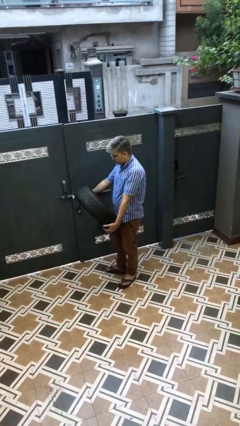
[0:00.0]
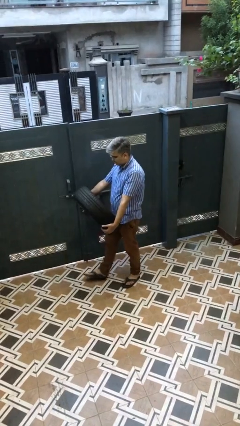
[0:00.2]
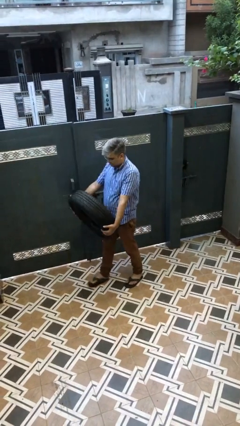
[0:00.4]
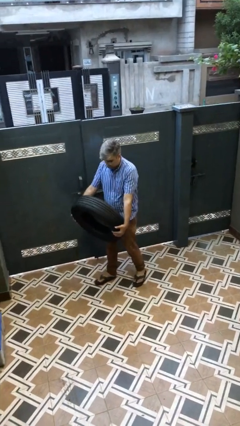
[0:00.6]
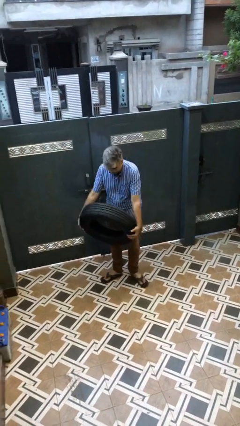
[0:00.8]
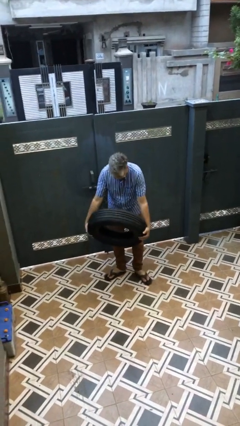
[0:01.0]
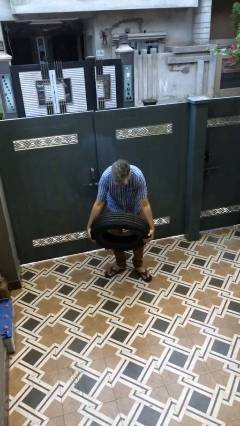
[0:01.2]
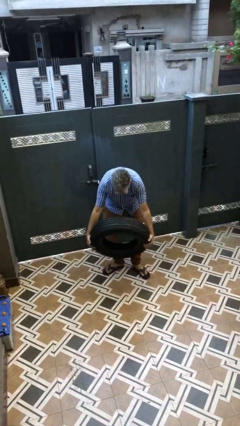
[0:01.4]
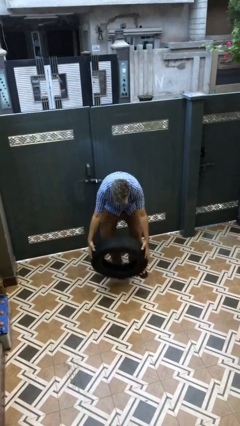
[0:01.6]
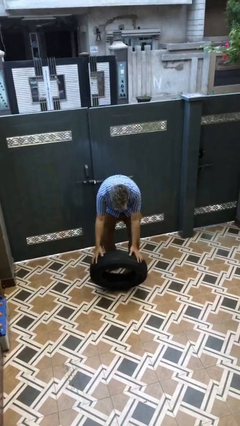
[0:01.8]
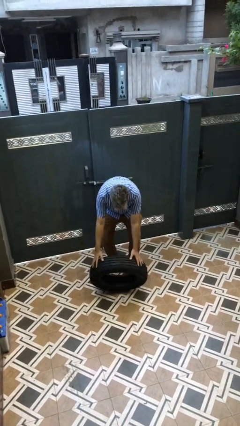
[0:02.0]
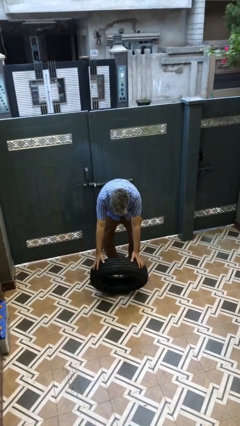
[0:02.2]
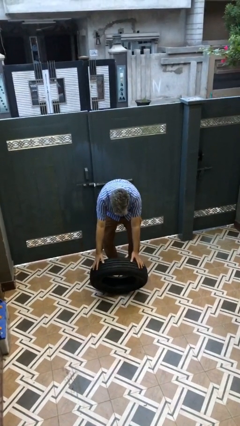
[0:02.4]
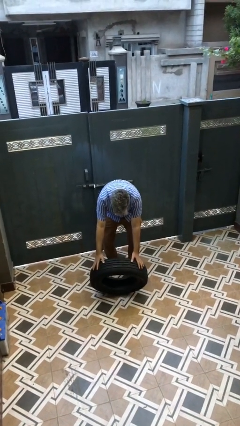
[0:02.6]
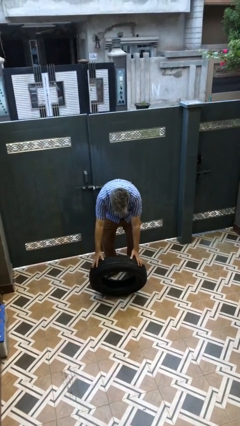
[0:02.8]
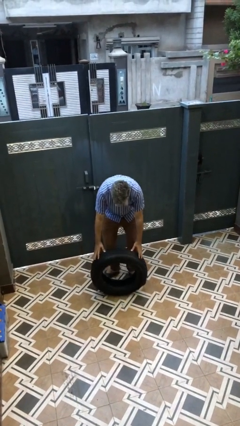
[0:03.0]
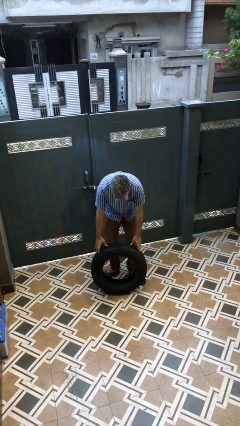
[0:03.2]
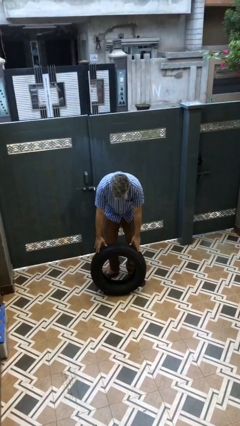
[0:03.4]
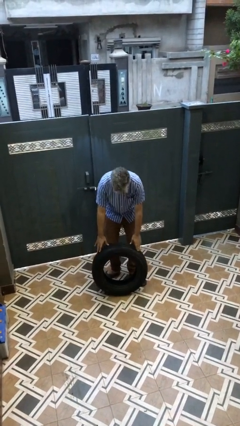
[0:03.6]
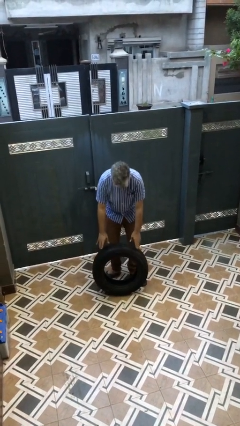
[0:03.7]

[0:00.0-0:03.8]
person puts down object on floor

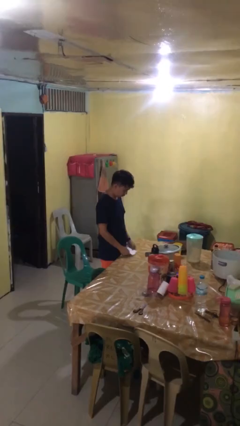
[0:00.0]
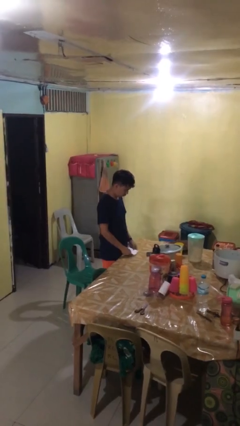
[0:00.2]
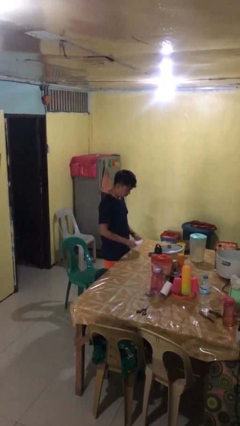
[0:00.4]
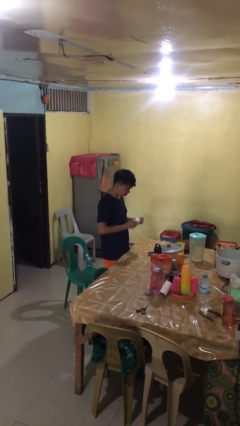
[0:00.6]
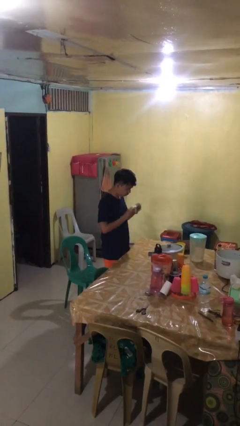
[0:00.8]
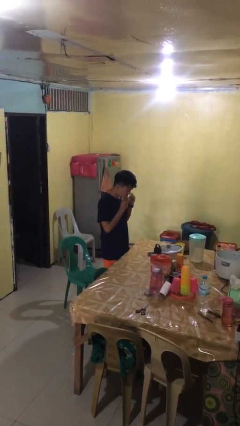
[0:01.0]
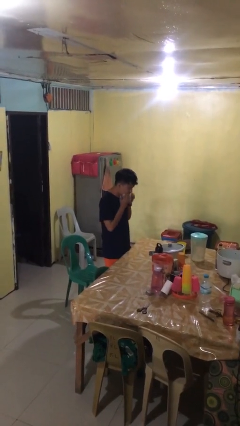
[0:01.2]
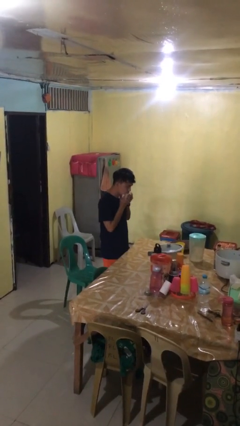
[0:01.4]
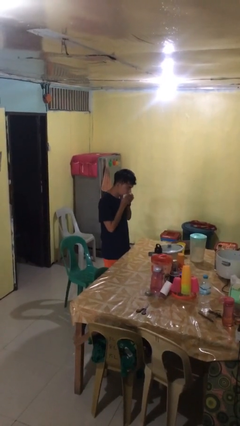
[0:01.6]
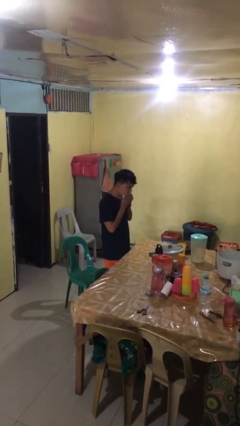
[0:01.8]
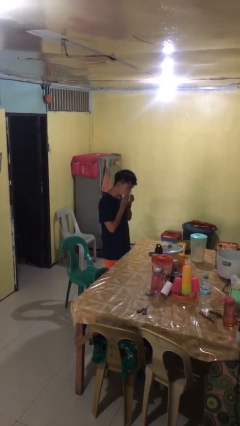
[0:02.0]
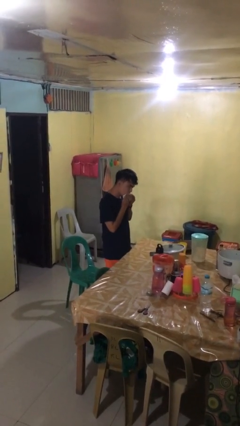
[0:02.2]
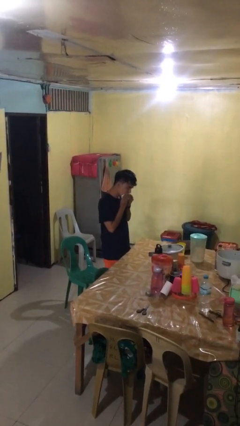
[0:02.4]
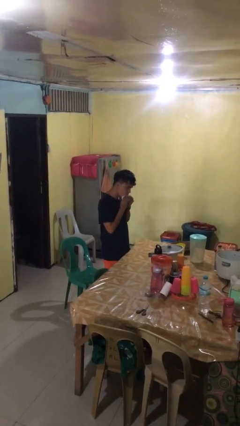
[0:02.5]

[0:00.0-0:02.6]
person wipes mouth with napkin

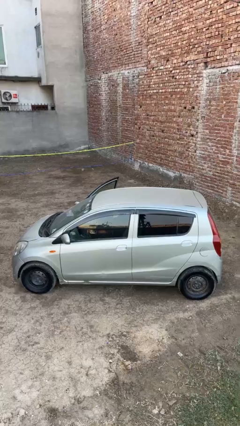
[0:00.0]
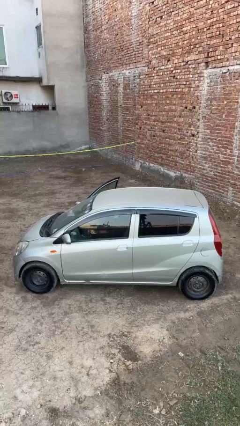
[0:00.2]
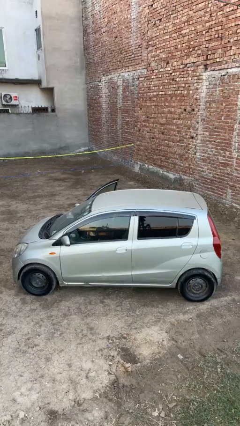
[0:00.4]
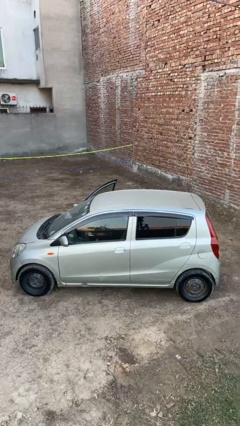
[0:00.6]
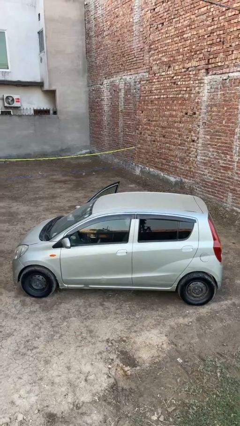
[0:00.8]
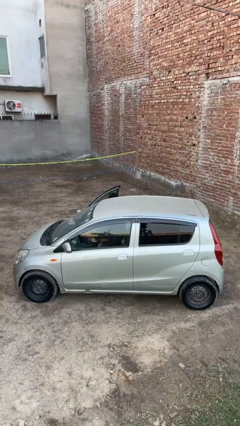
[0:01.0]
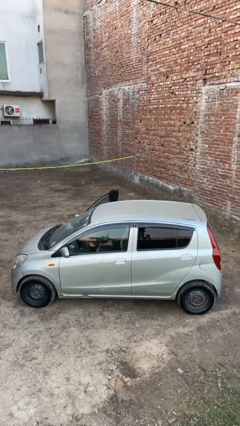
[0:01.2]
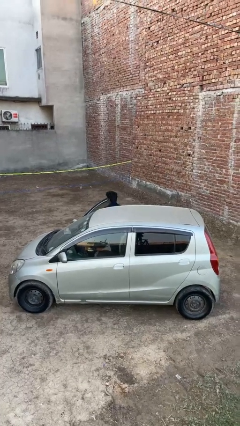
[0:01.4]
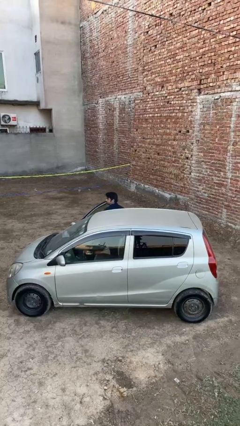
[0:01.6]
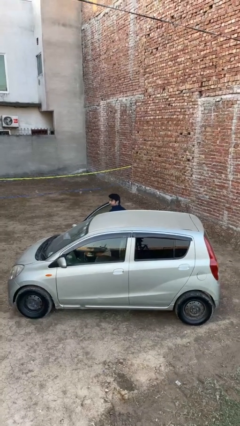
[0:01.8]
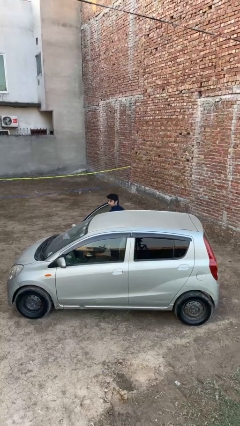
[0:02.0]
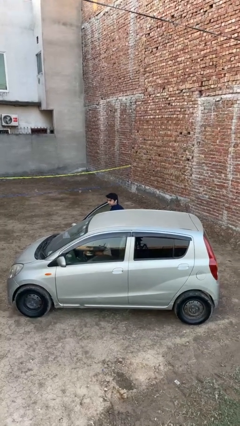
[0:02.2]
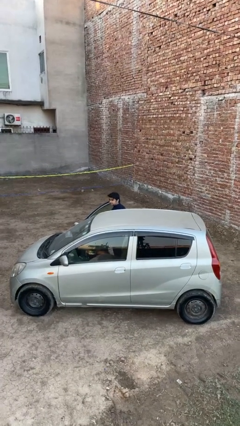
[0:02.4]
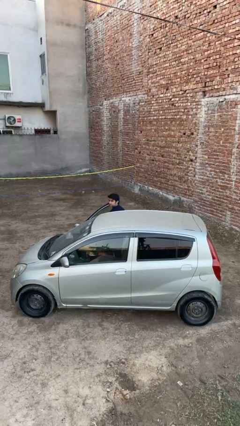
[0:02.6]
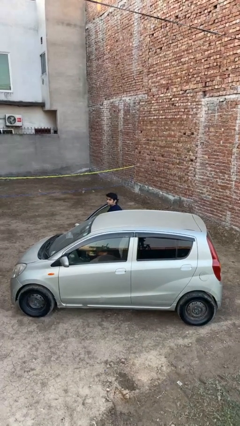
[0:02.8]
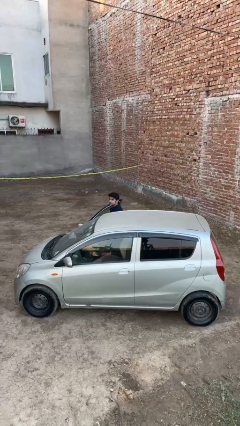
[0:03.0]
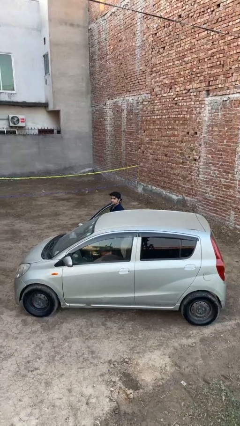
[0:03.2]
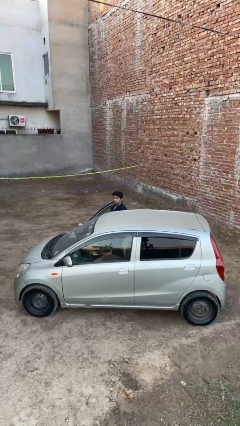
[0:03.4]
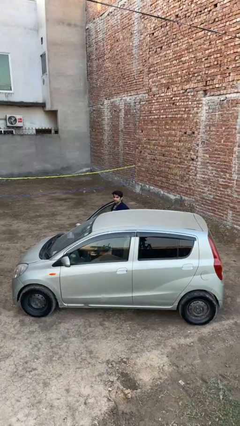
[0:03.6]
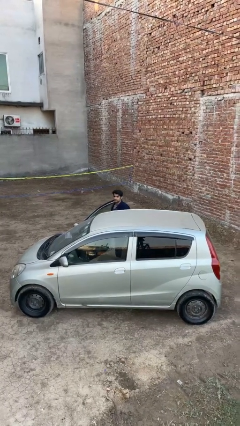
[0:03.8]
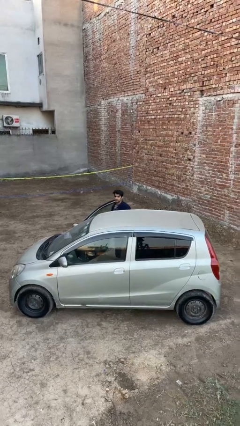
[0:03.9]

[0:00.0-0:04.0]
person exits car

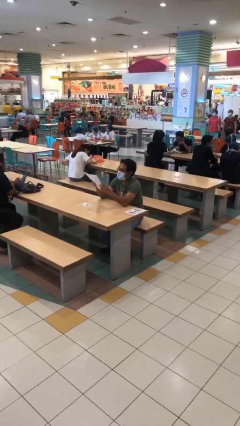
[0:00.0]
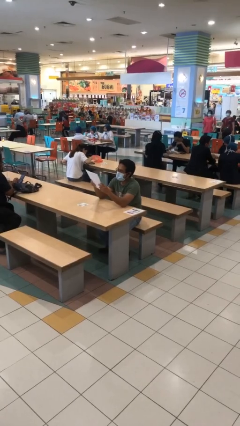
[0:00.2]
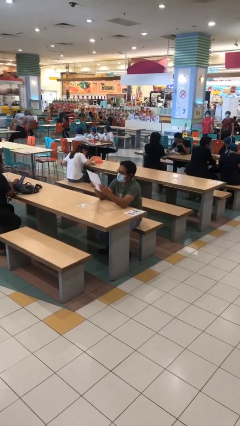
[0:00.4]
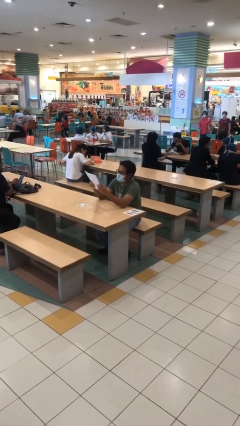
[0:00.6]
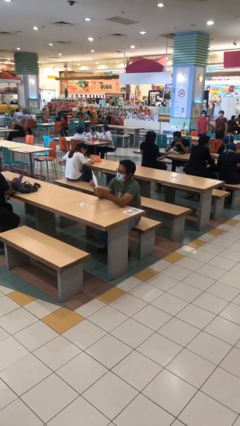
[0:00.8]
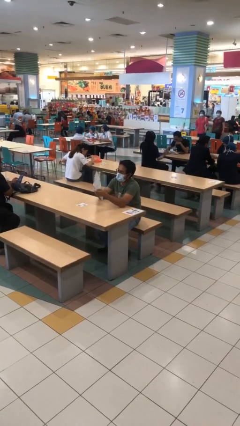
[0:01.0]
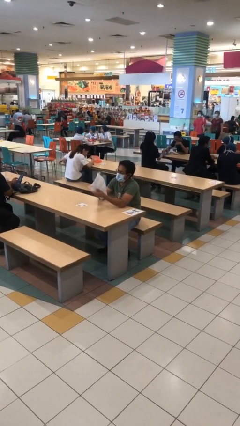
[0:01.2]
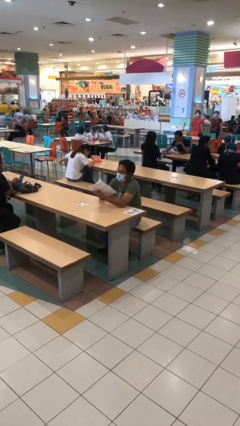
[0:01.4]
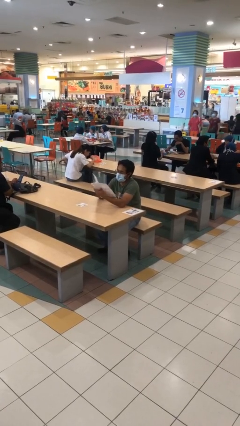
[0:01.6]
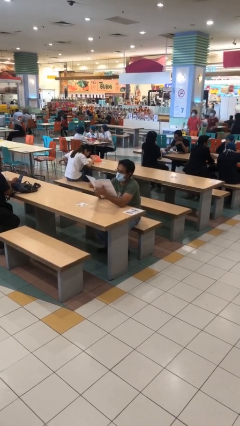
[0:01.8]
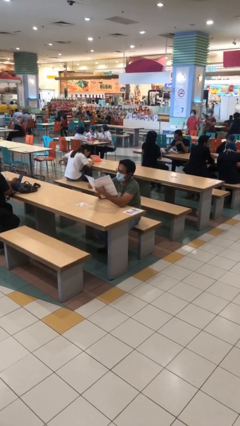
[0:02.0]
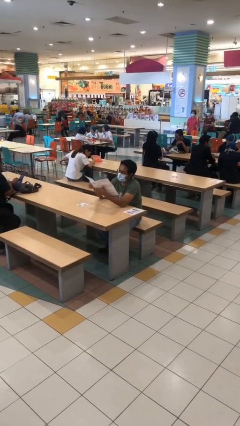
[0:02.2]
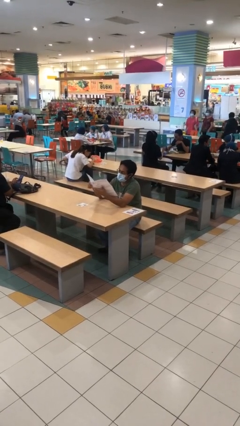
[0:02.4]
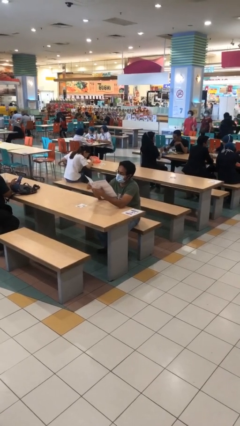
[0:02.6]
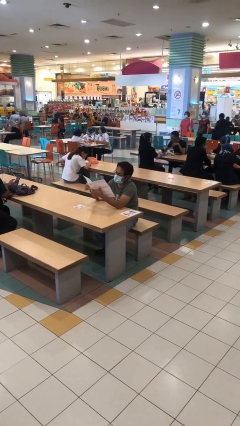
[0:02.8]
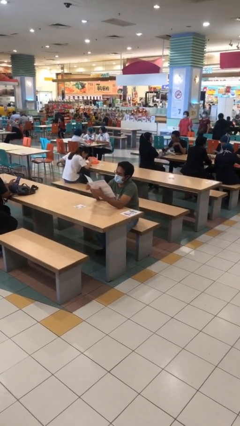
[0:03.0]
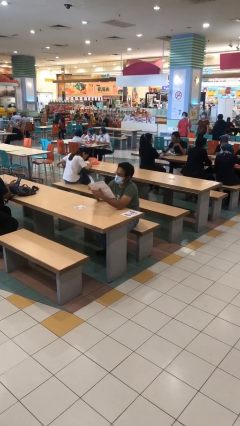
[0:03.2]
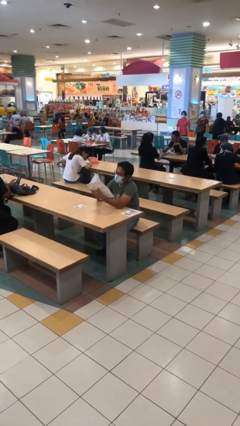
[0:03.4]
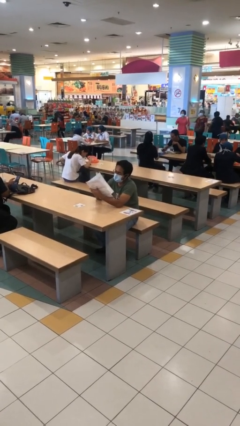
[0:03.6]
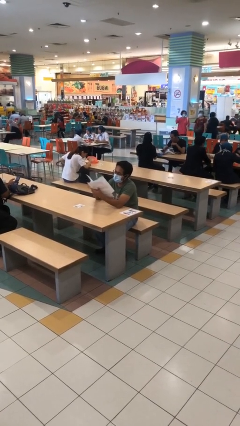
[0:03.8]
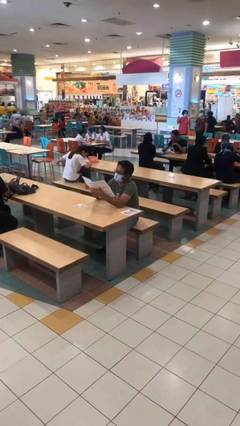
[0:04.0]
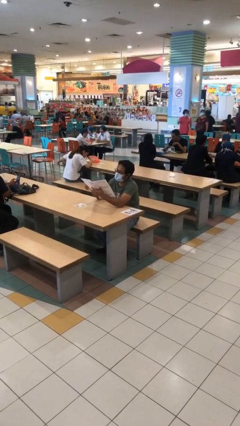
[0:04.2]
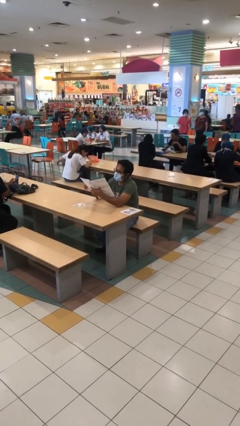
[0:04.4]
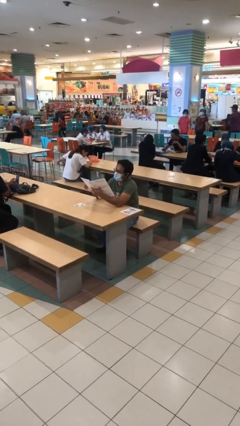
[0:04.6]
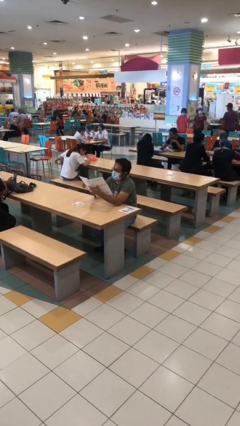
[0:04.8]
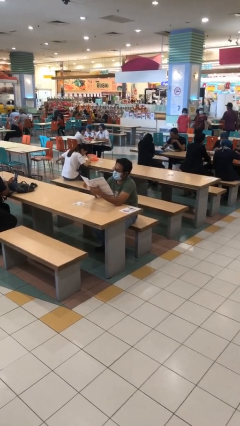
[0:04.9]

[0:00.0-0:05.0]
person reads document

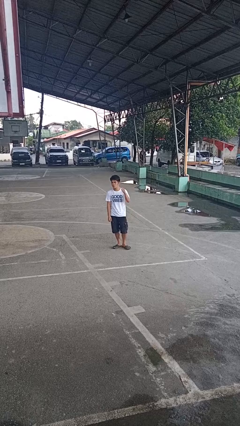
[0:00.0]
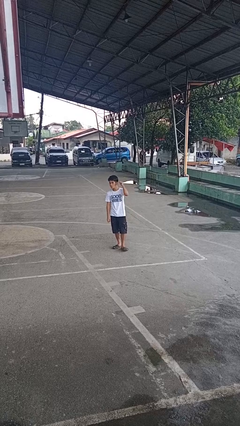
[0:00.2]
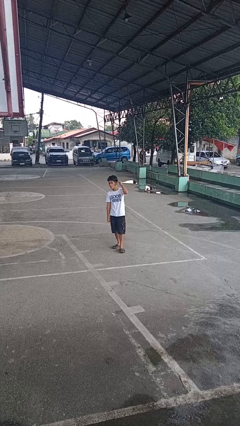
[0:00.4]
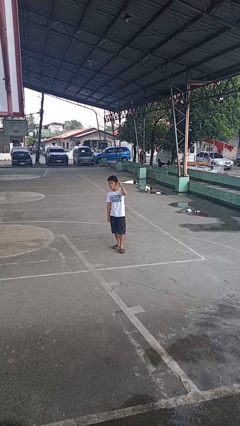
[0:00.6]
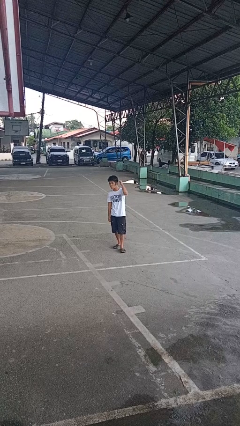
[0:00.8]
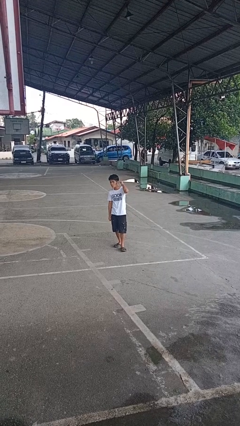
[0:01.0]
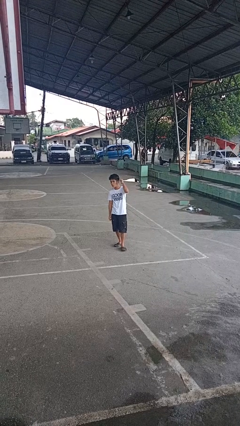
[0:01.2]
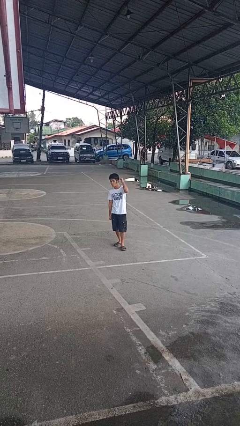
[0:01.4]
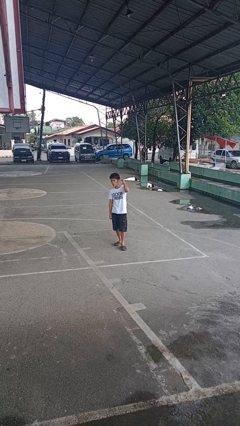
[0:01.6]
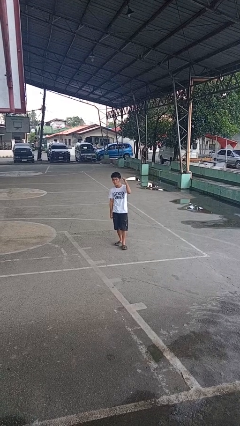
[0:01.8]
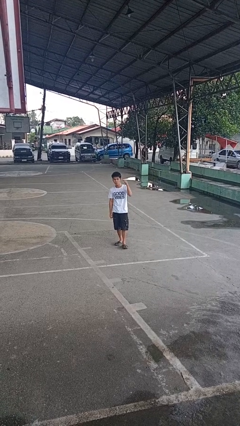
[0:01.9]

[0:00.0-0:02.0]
person gestures behind me

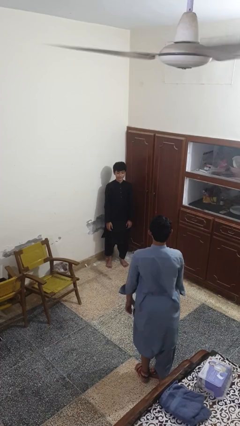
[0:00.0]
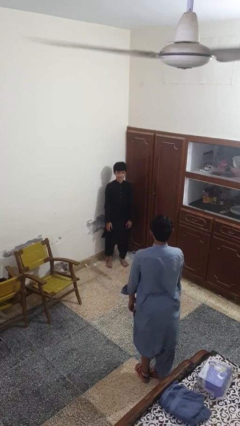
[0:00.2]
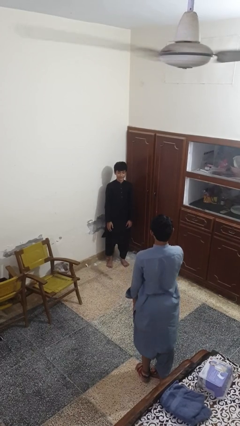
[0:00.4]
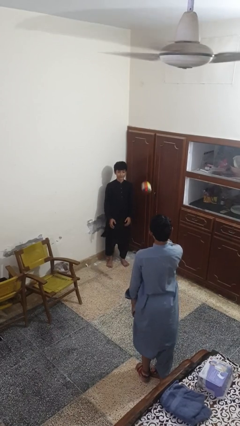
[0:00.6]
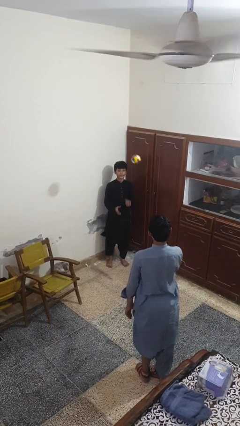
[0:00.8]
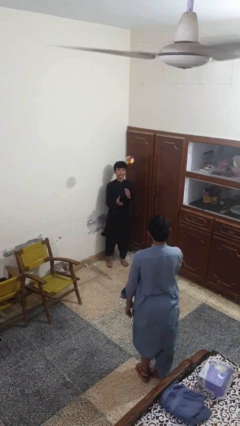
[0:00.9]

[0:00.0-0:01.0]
person catches object from person
